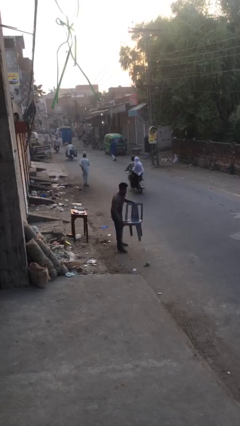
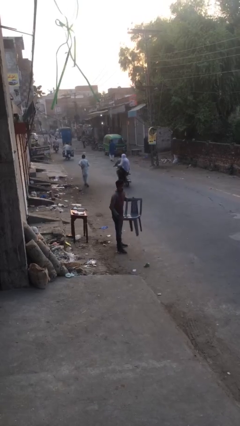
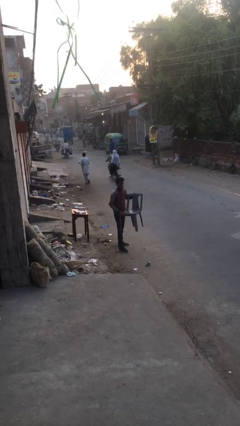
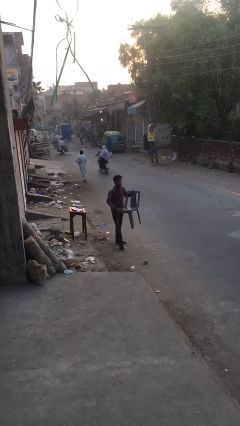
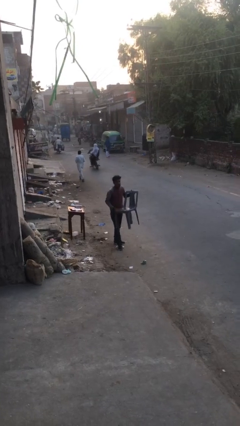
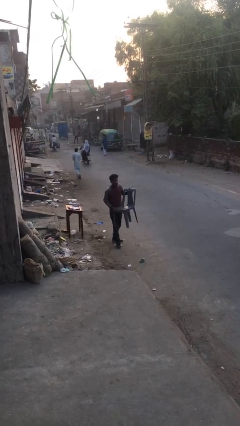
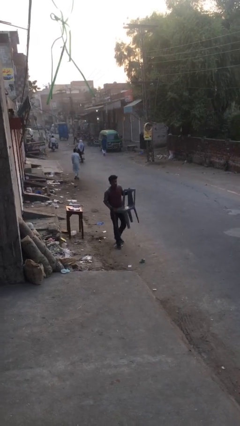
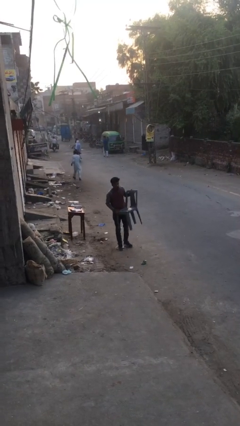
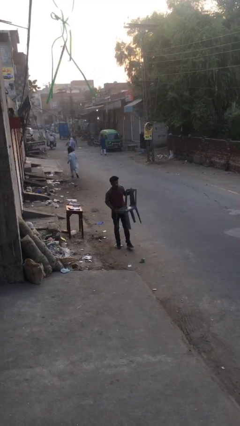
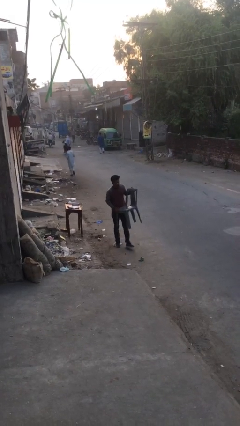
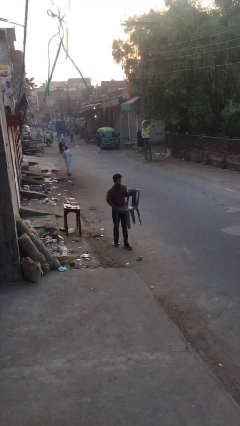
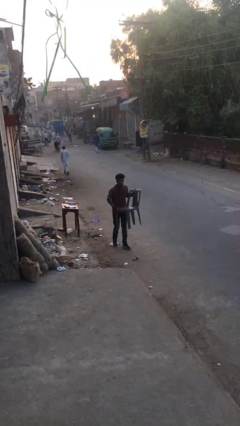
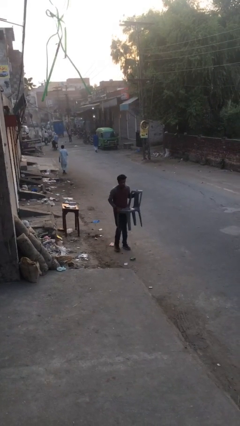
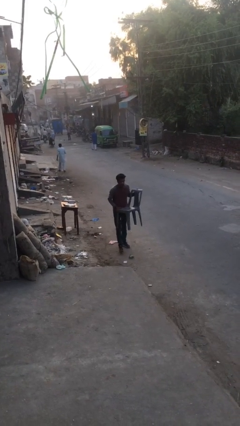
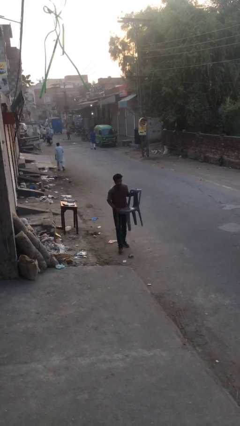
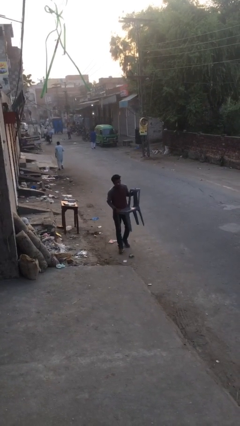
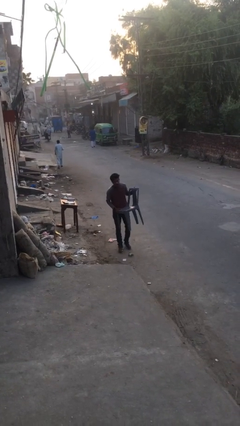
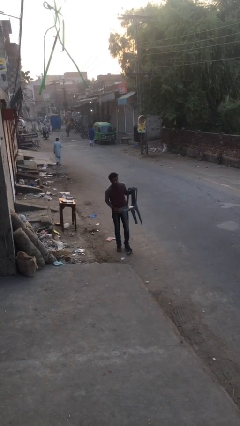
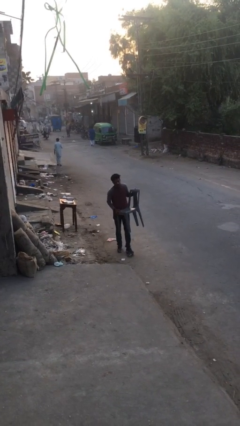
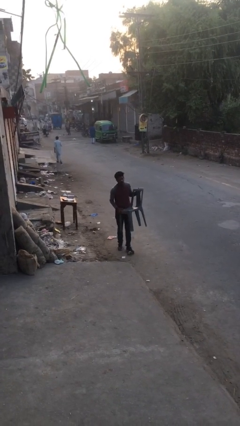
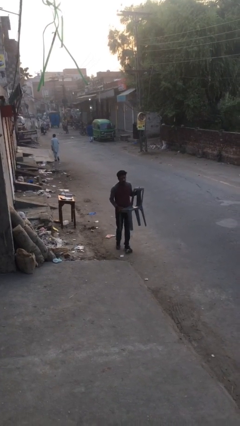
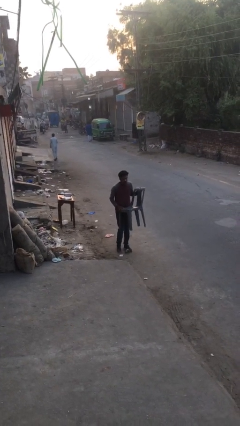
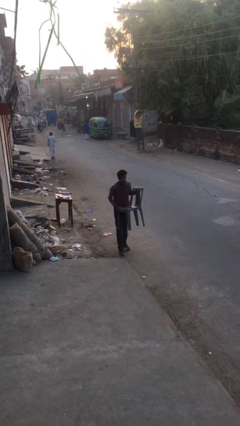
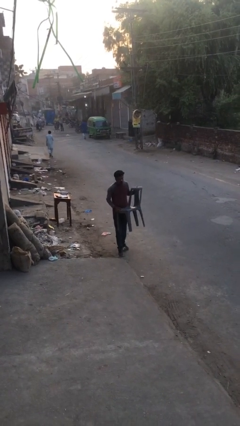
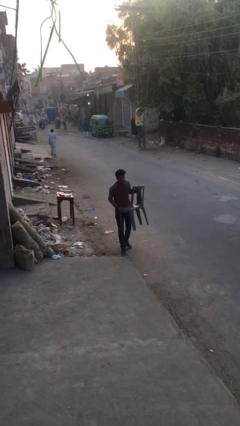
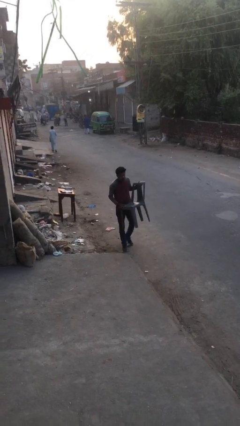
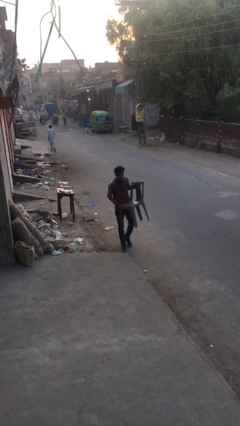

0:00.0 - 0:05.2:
person carries heavy object

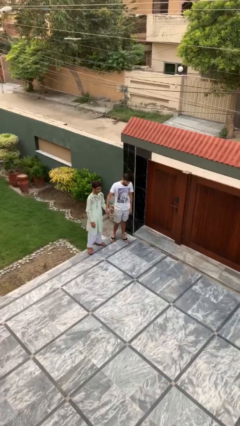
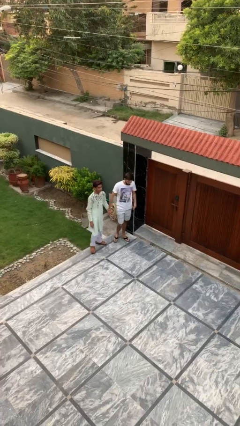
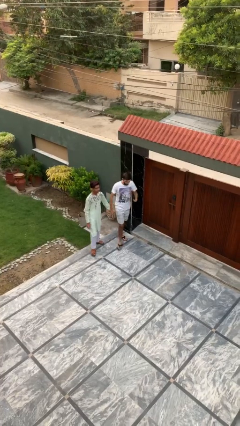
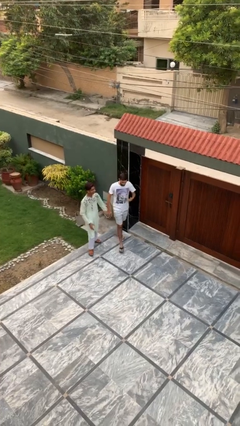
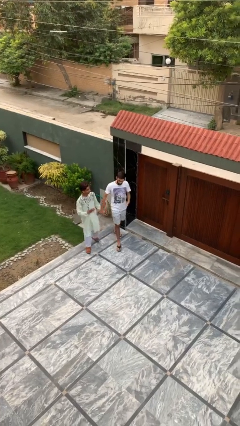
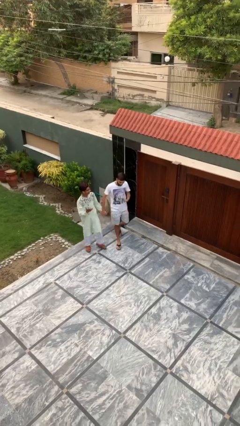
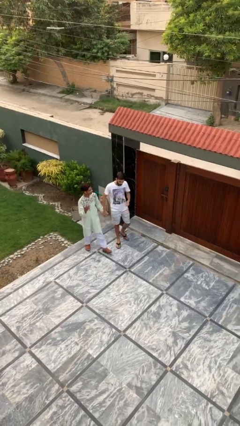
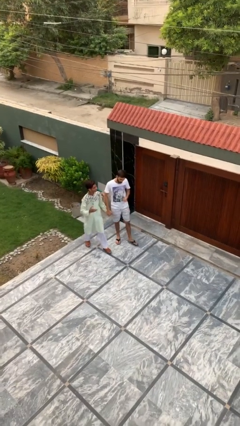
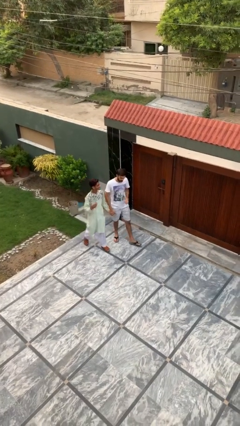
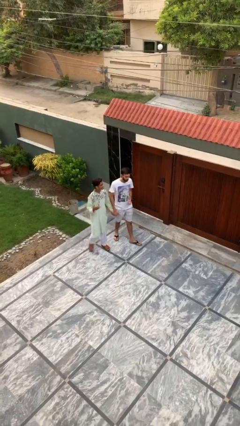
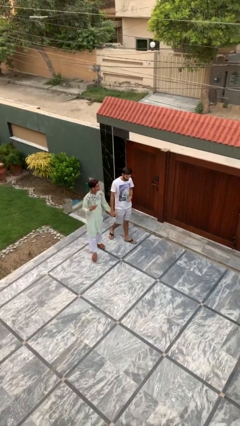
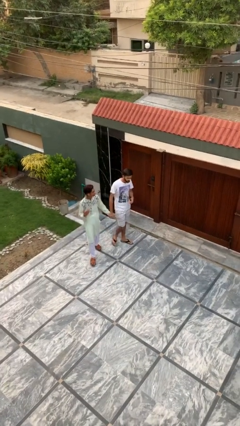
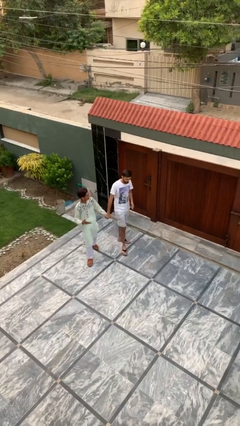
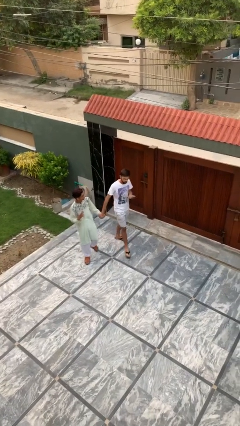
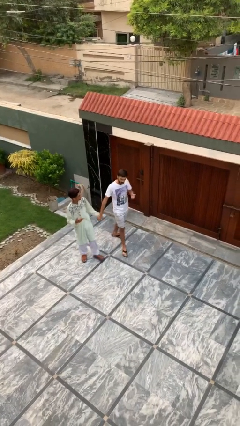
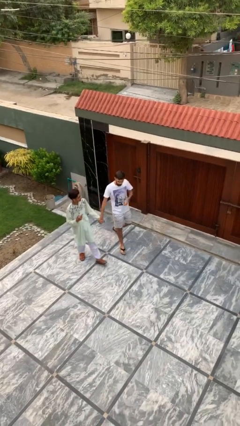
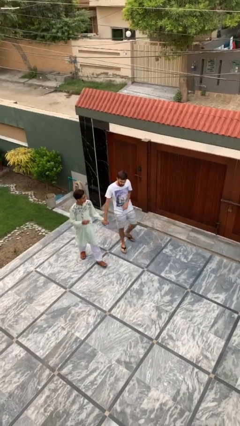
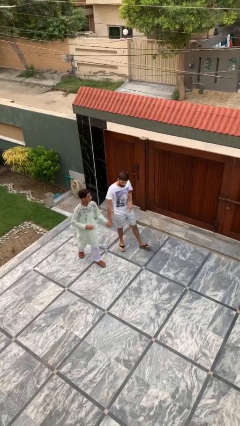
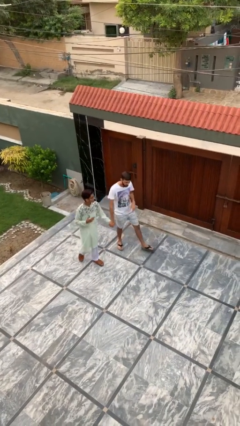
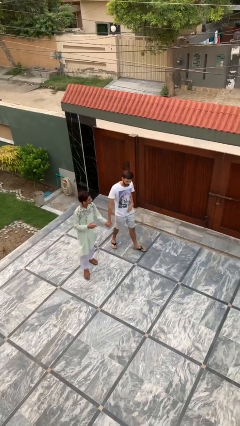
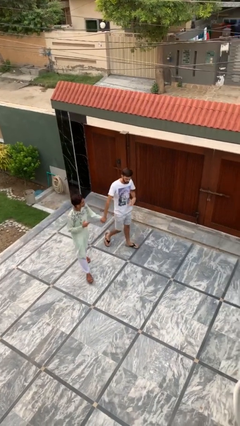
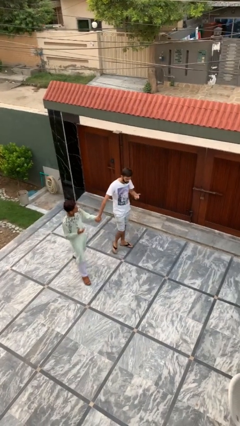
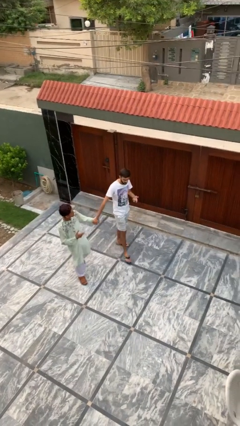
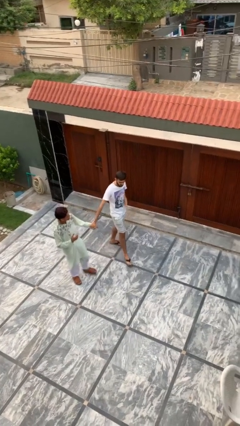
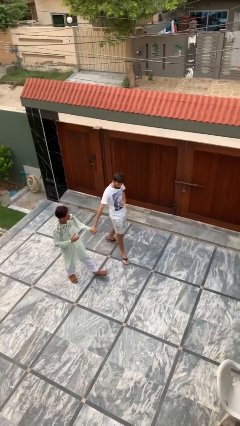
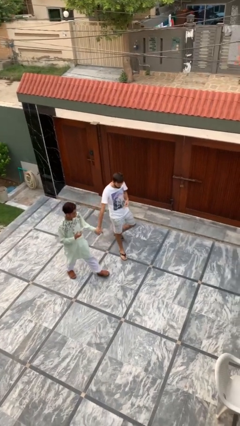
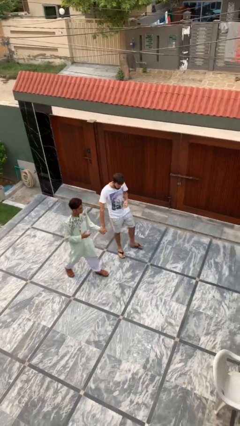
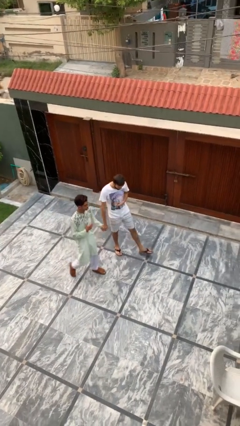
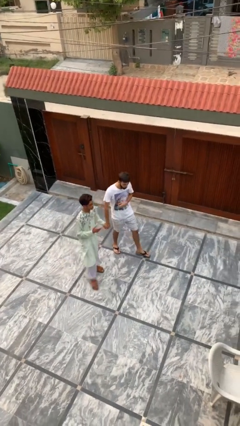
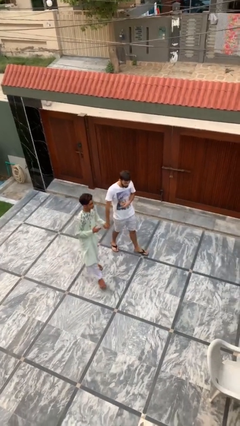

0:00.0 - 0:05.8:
person holds hand

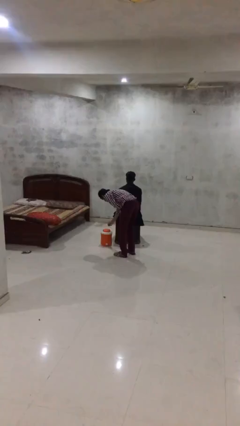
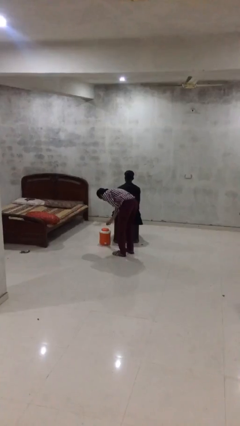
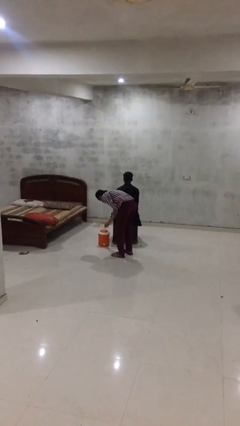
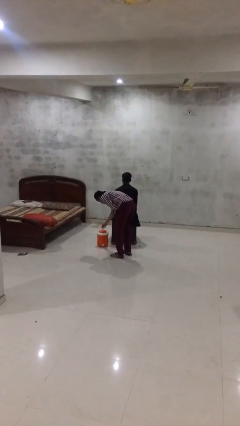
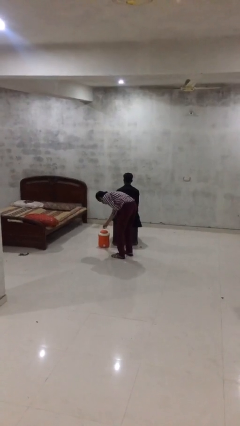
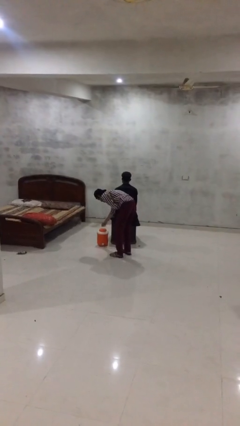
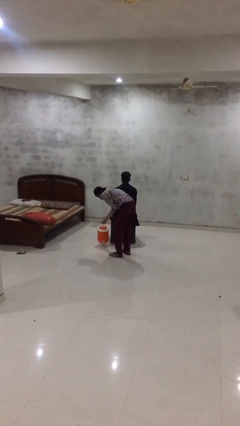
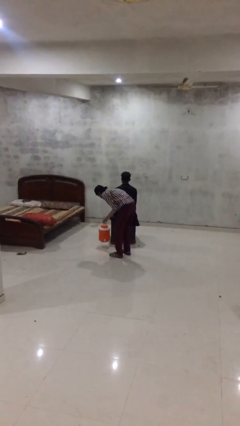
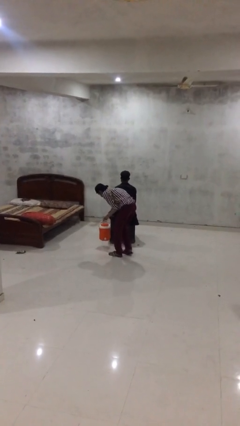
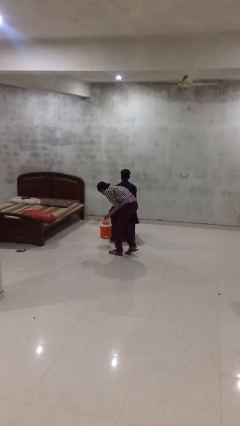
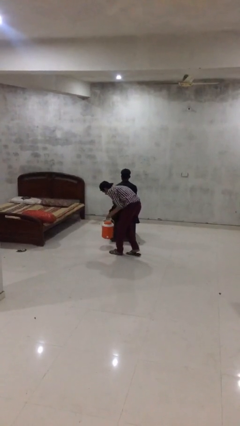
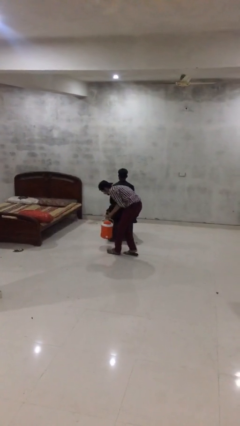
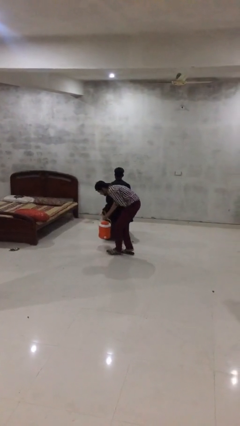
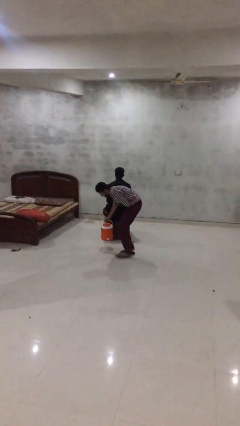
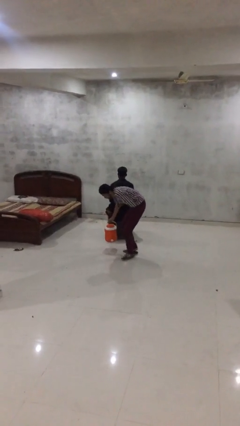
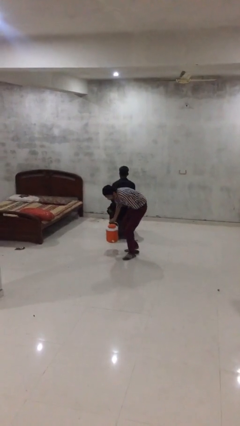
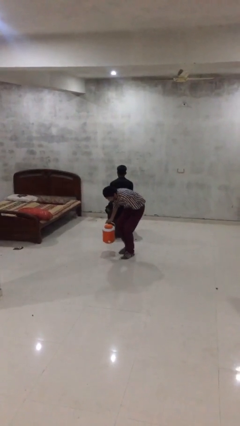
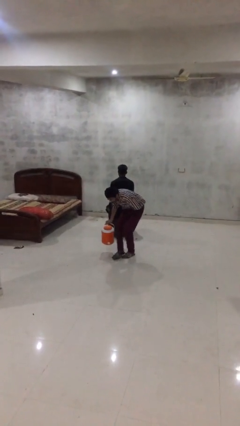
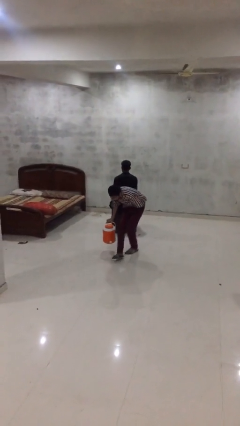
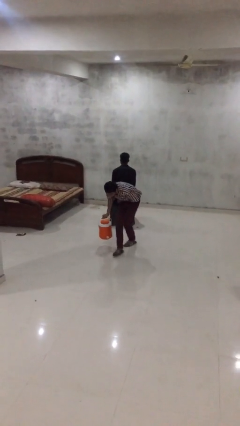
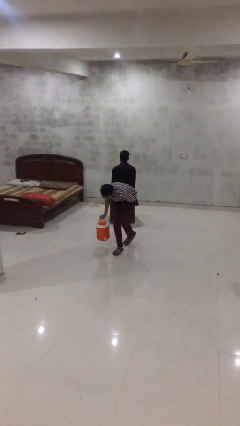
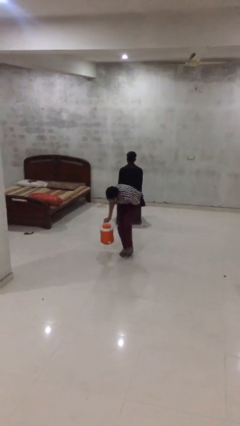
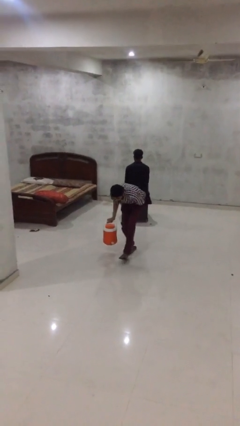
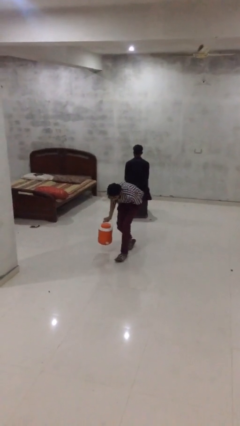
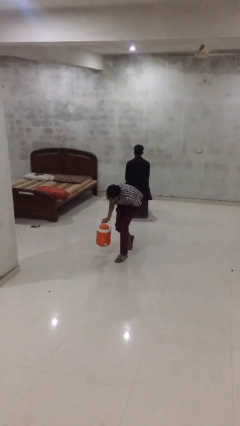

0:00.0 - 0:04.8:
person steals object from person

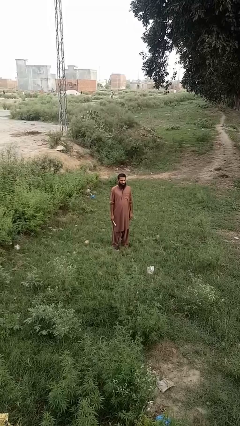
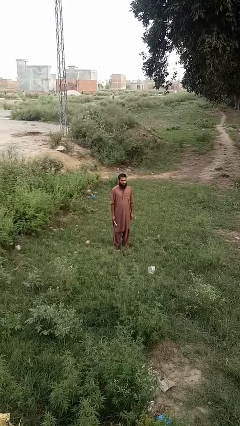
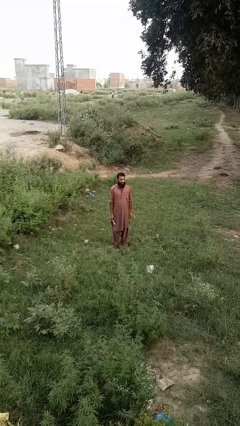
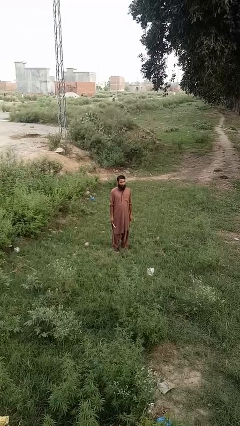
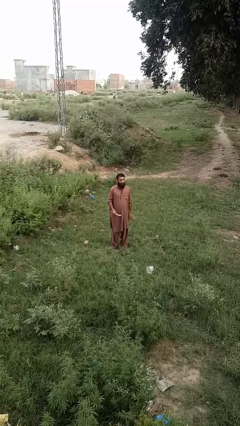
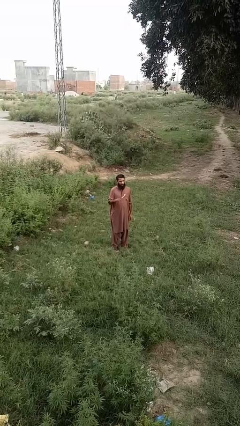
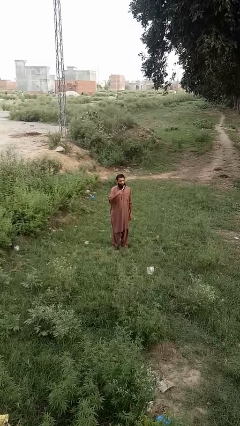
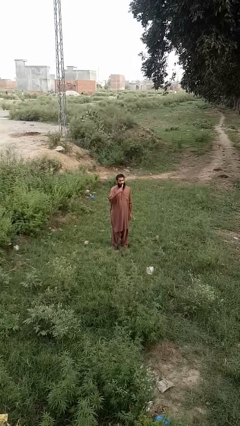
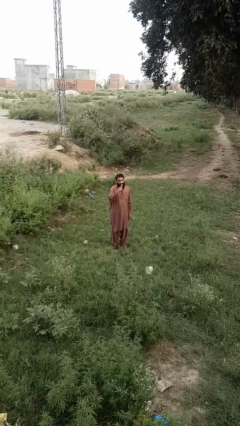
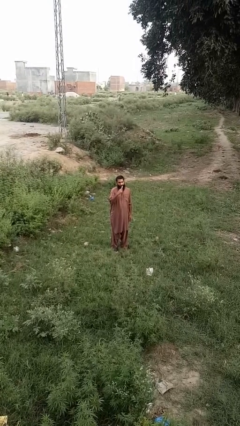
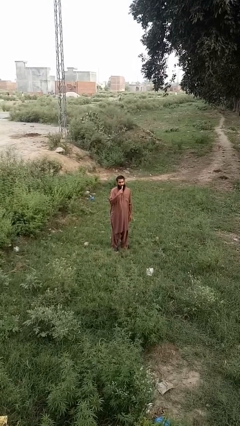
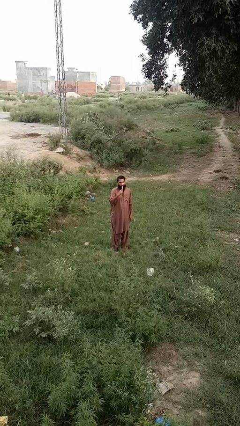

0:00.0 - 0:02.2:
person brushes teeth
